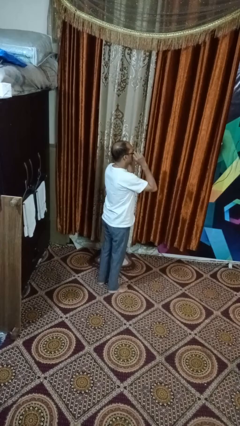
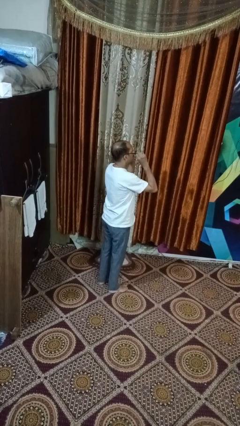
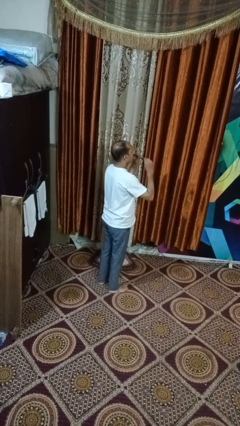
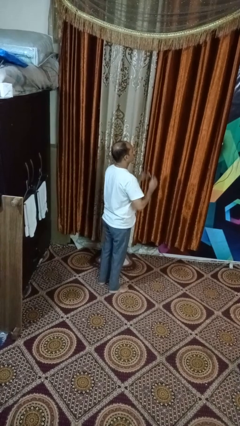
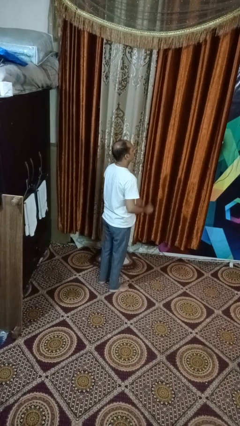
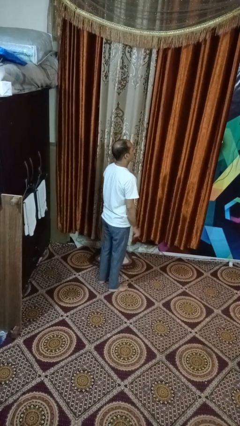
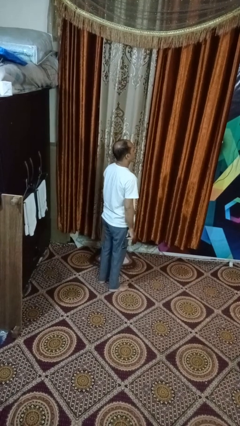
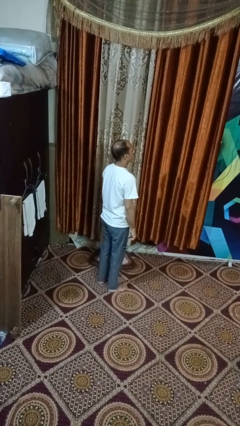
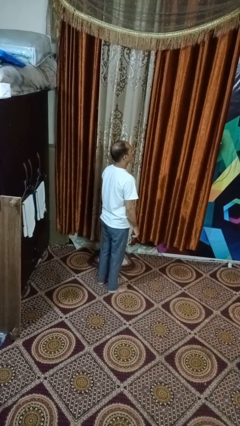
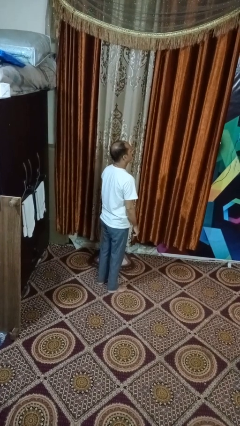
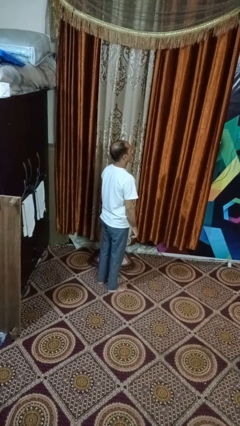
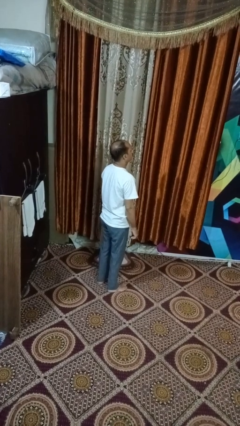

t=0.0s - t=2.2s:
person takes off glasses

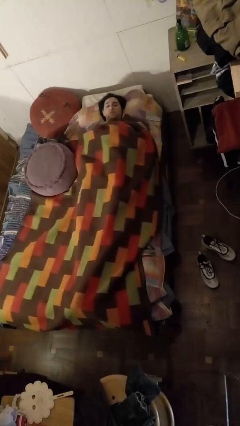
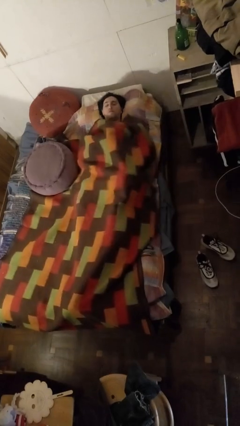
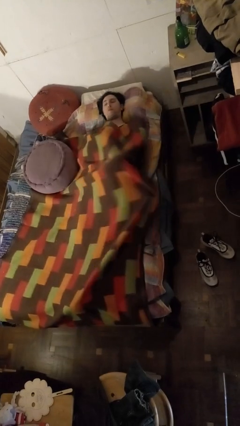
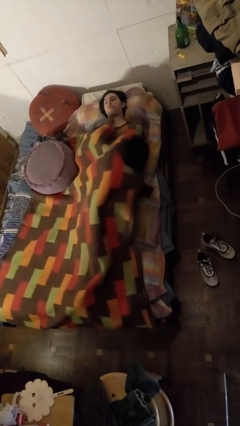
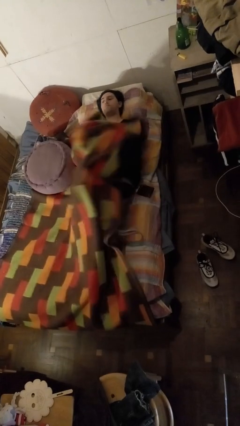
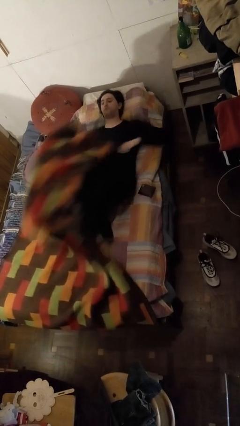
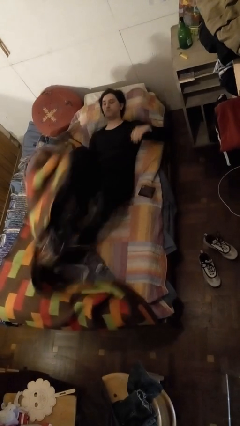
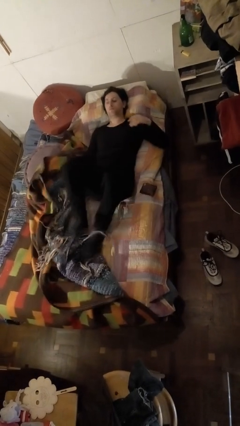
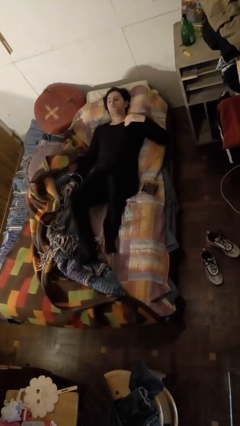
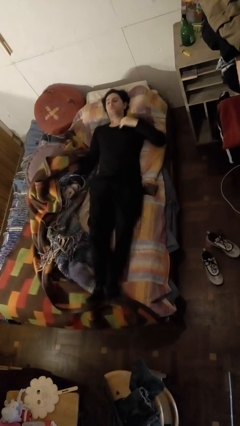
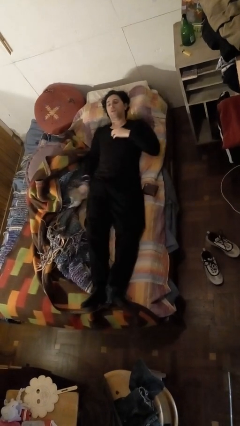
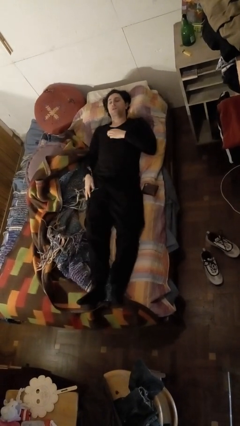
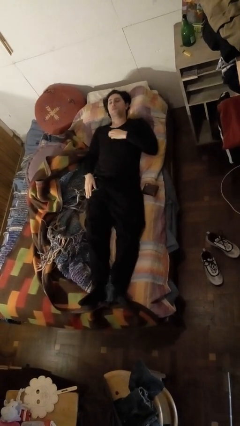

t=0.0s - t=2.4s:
person uncovers with bedsheets

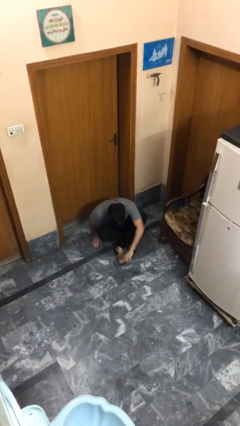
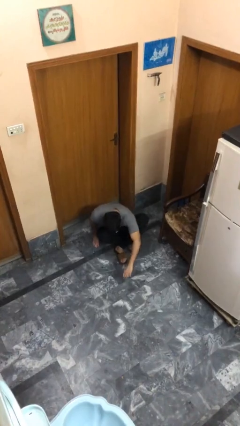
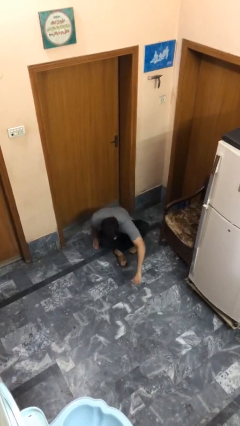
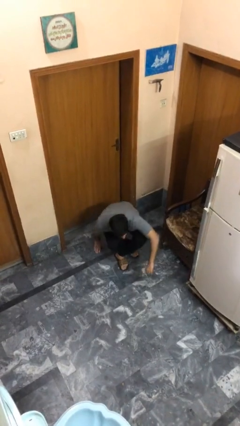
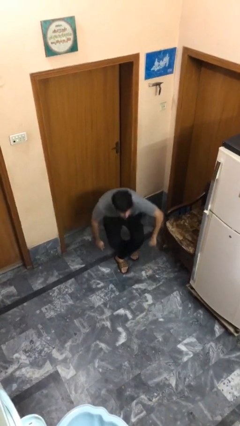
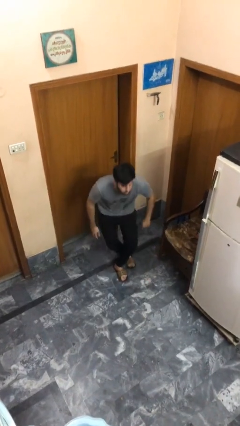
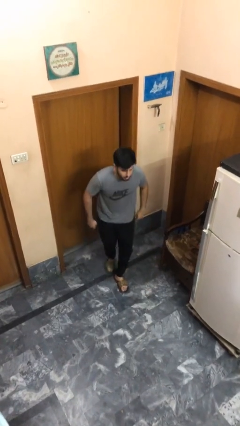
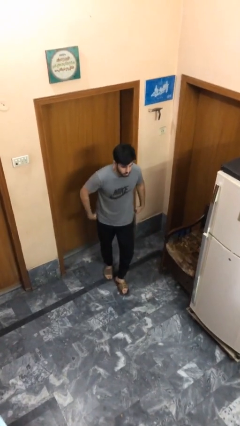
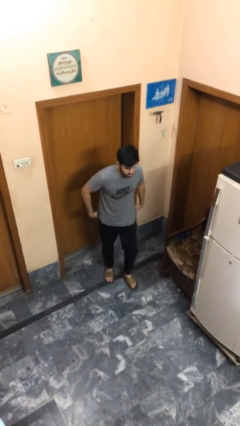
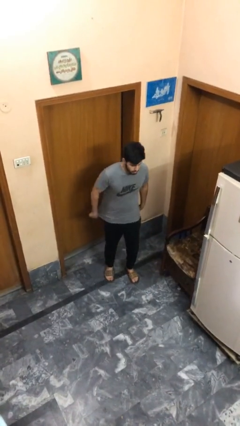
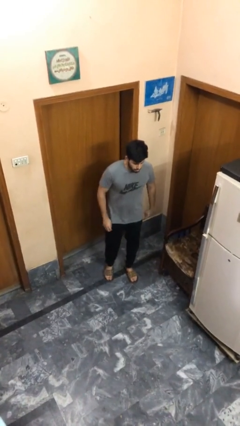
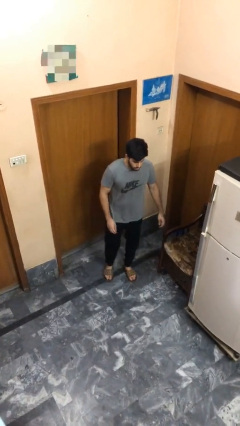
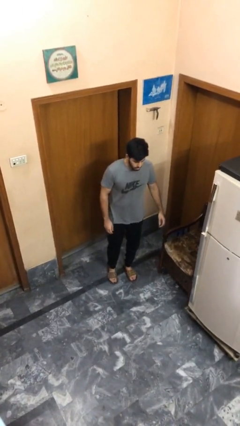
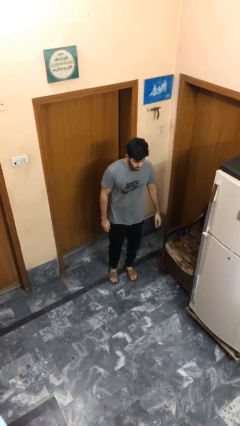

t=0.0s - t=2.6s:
person stands up from floor

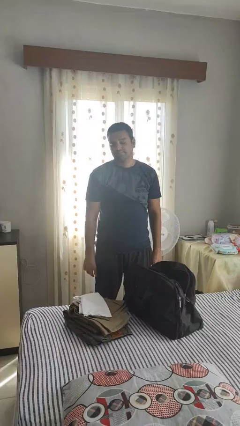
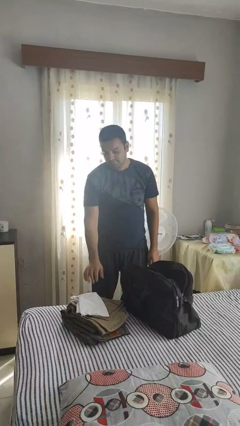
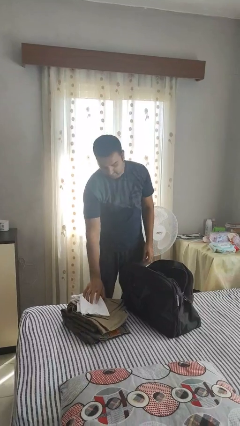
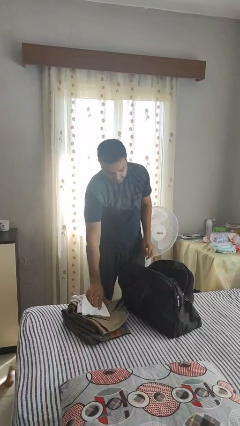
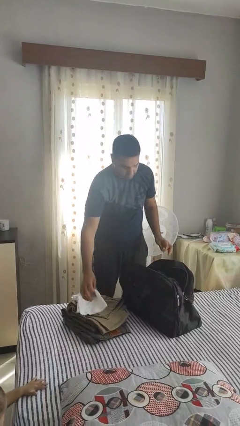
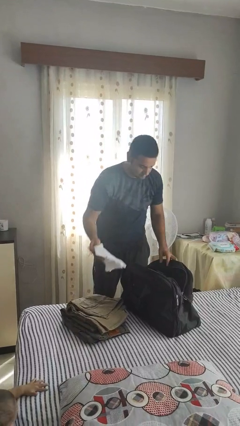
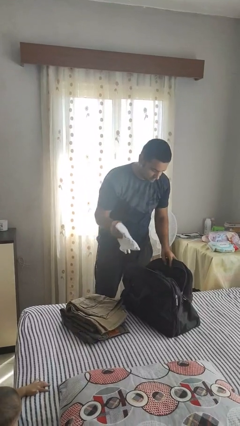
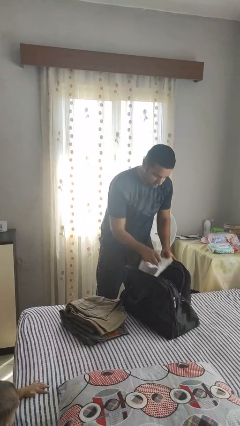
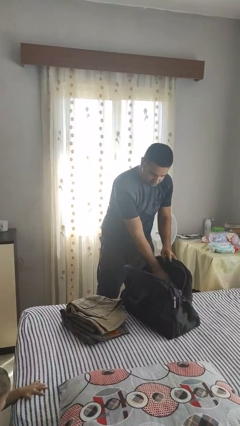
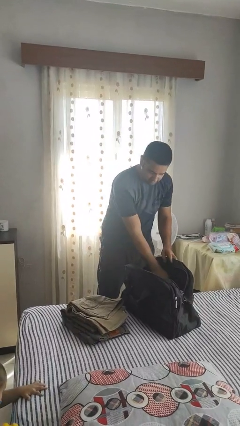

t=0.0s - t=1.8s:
person loads clothes into suitcase

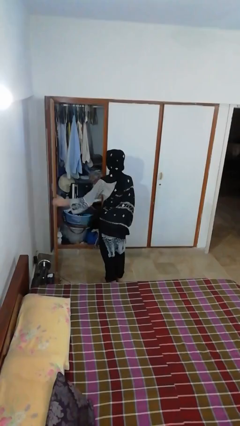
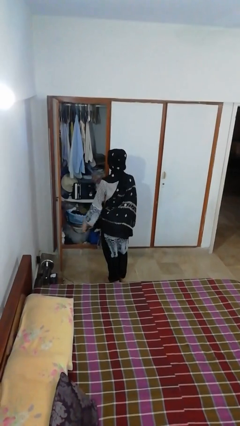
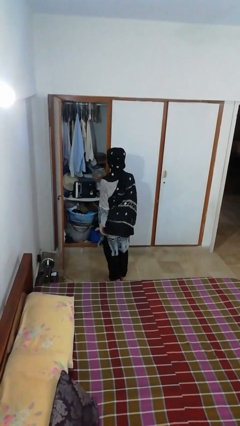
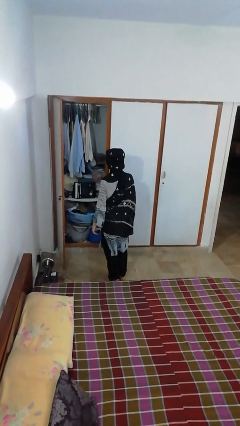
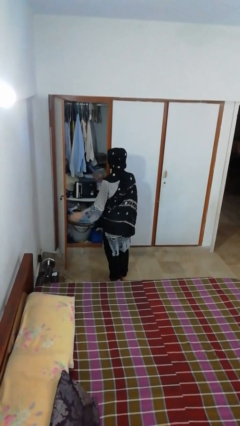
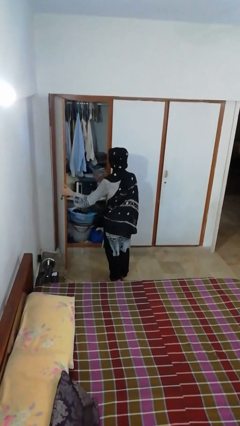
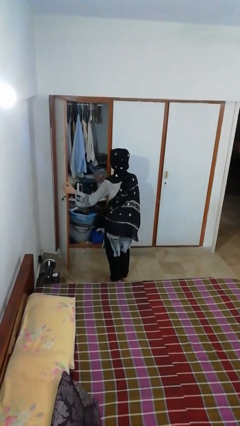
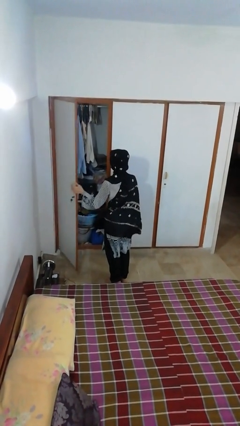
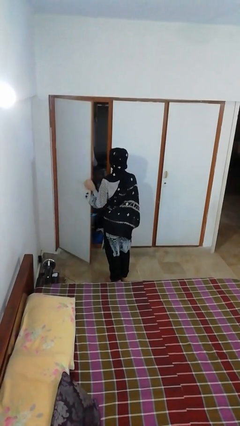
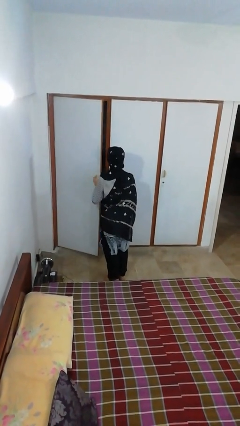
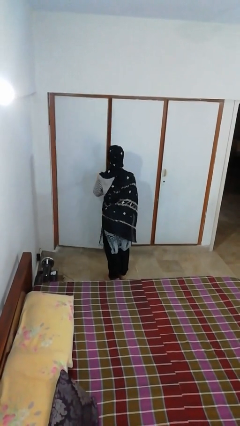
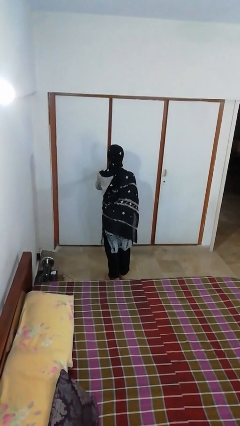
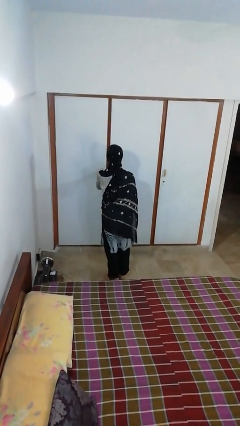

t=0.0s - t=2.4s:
person closes closet door

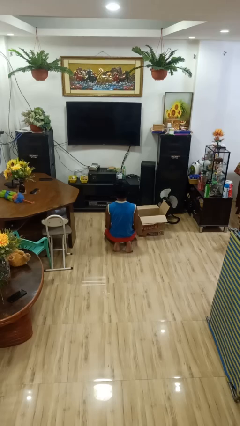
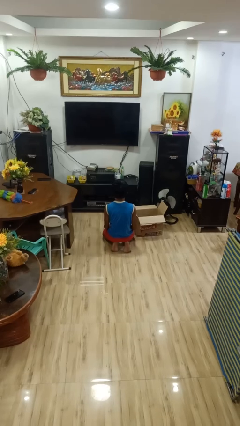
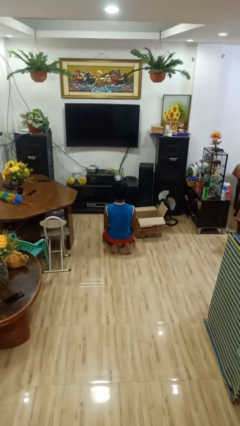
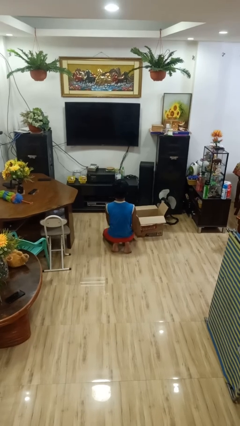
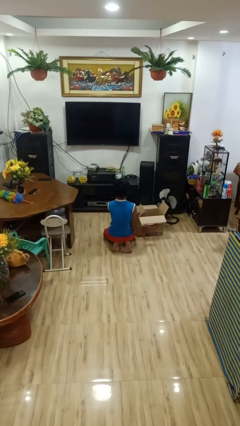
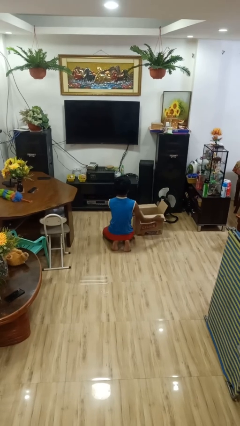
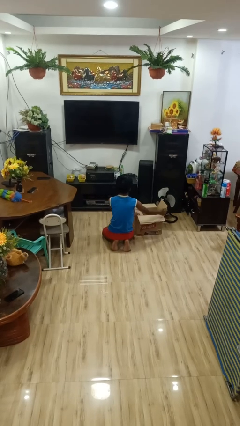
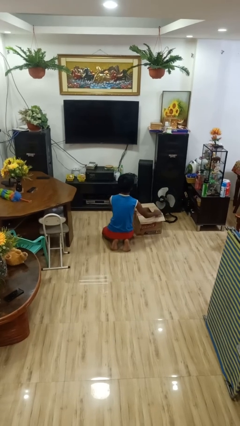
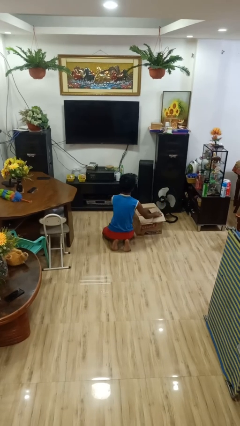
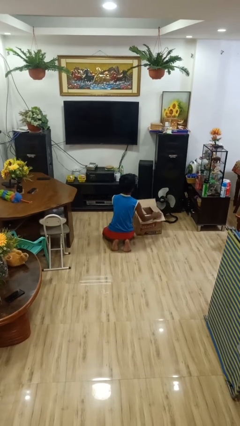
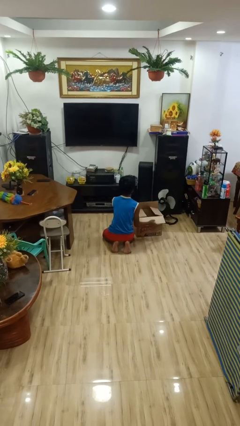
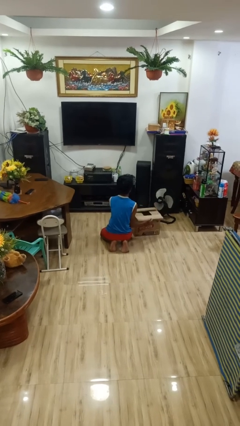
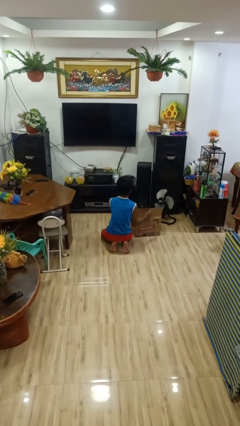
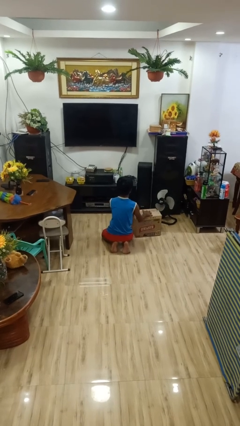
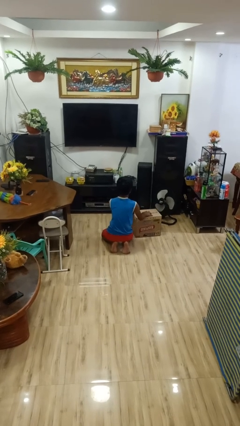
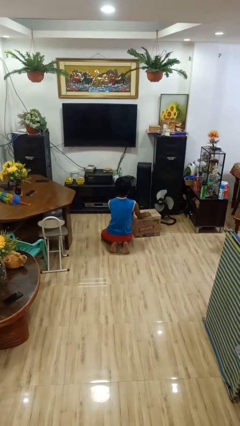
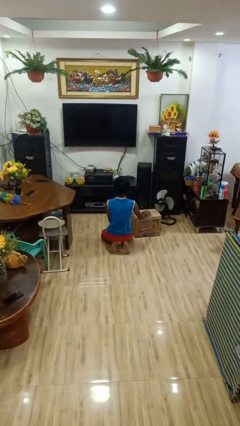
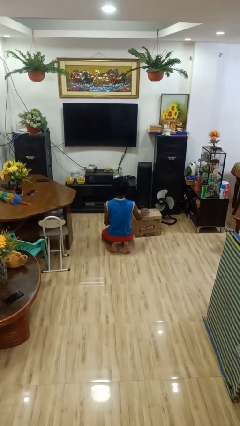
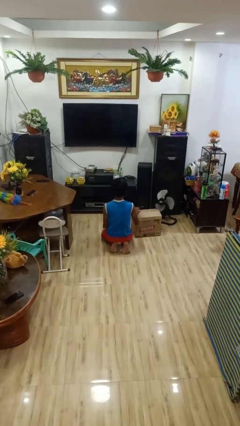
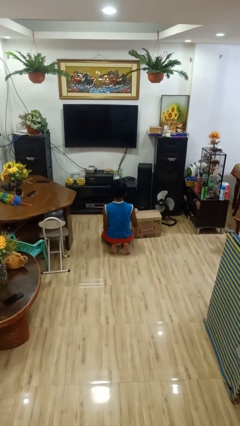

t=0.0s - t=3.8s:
person closes box

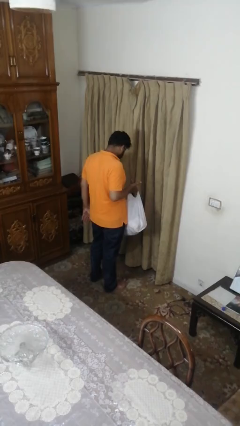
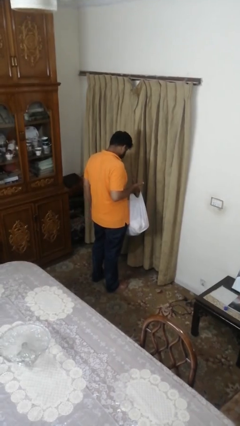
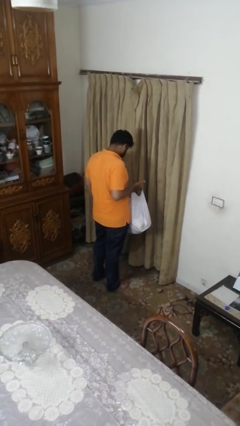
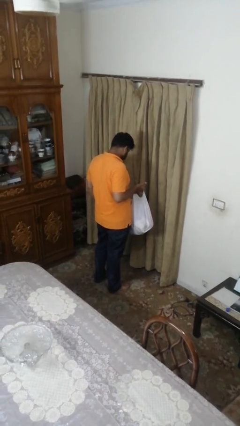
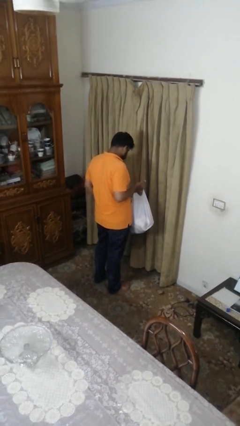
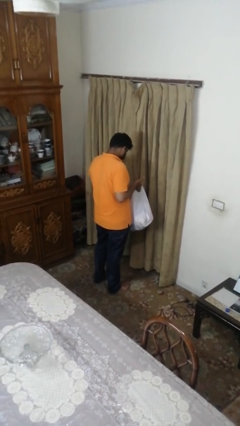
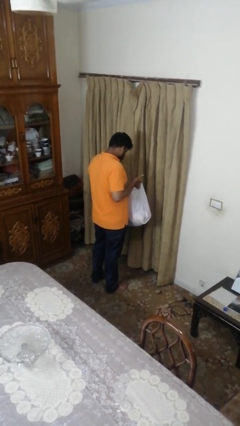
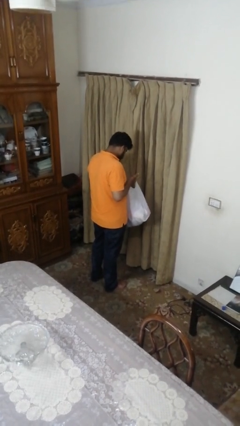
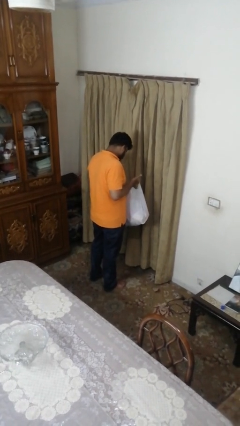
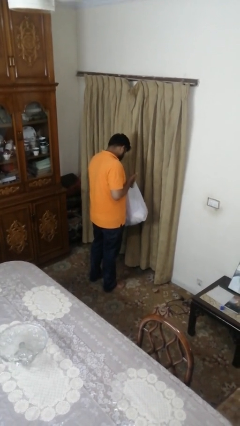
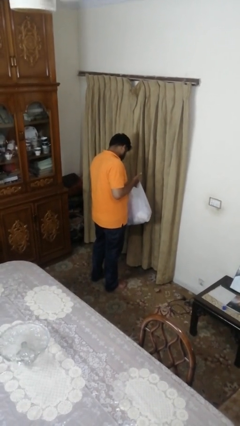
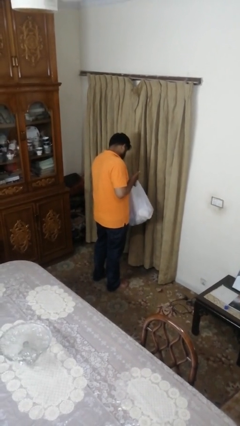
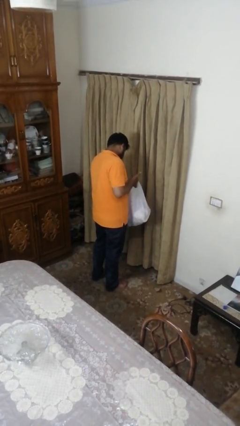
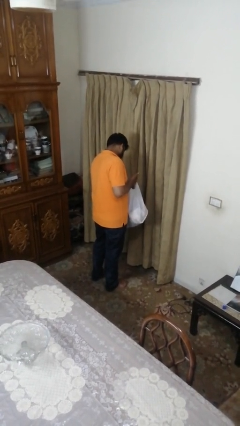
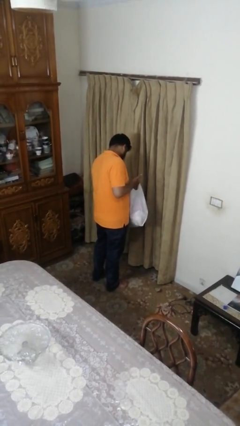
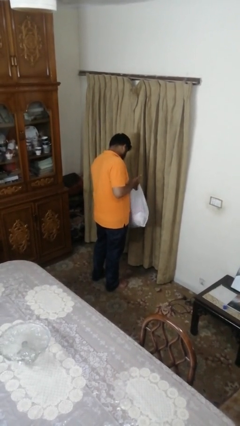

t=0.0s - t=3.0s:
person searches in bag
